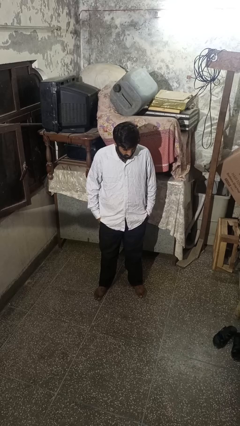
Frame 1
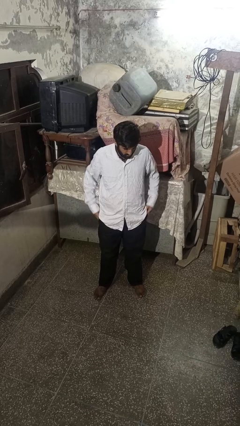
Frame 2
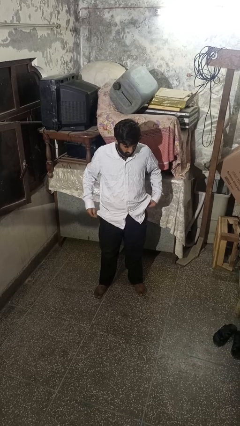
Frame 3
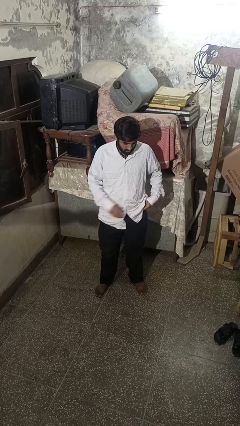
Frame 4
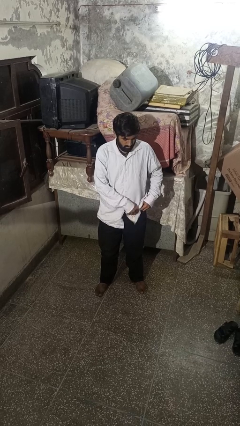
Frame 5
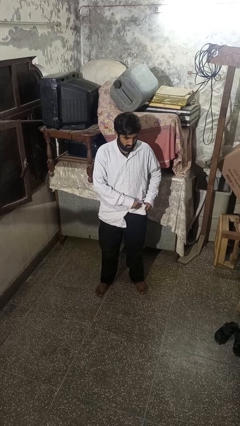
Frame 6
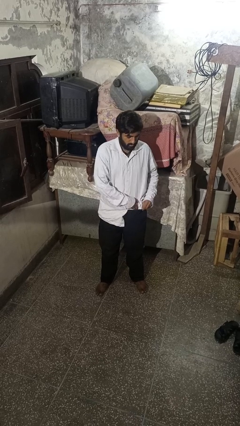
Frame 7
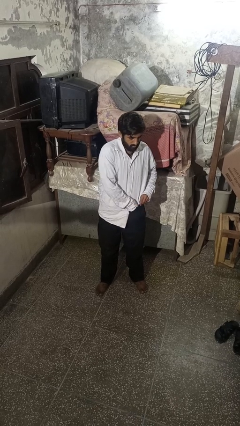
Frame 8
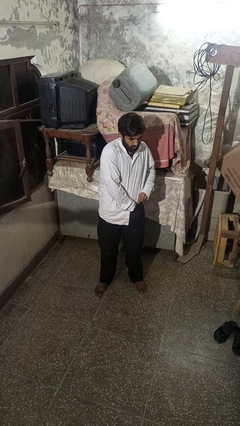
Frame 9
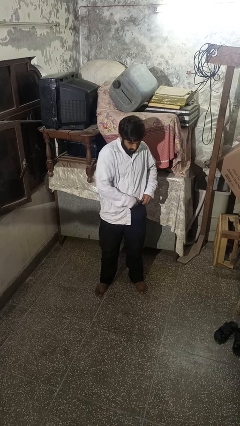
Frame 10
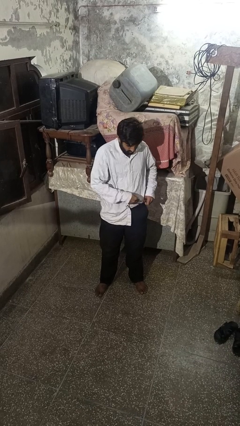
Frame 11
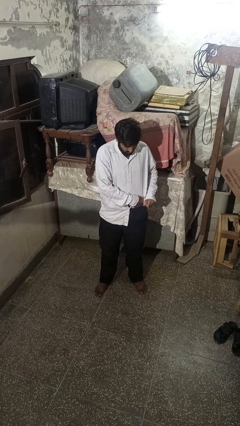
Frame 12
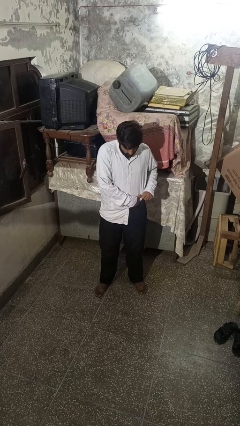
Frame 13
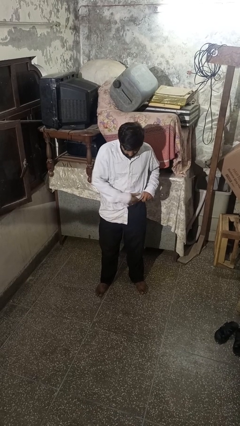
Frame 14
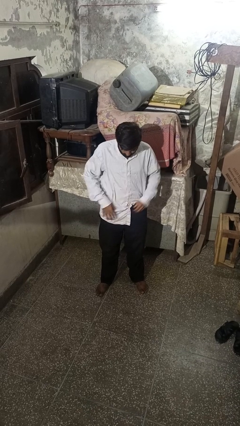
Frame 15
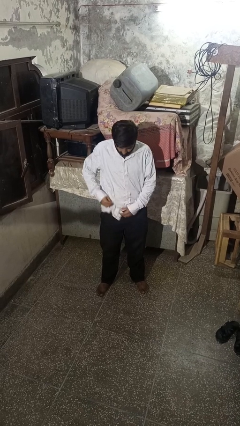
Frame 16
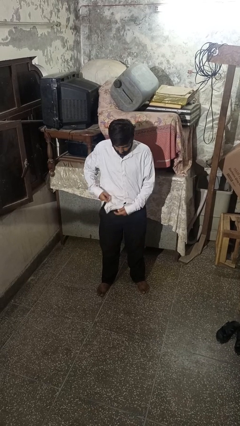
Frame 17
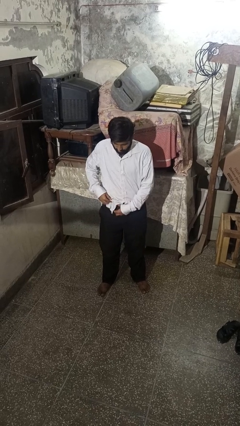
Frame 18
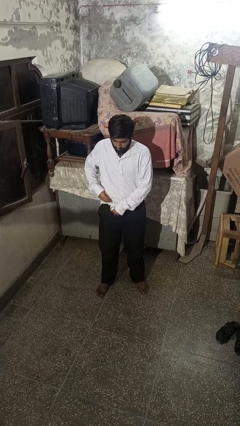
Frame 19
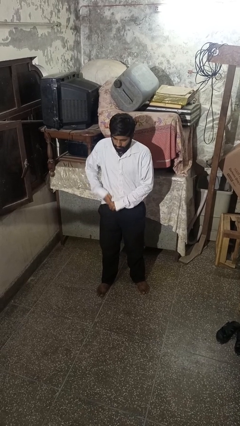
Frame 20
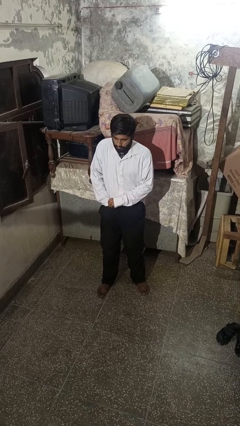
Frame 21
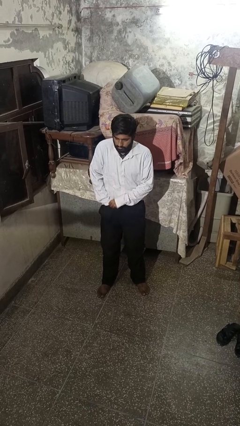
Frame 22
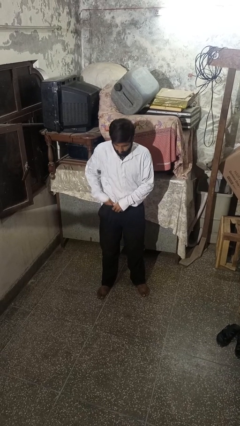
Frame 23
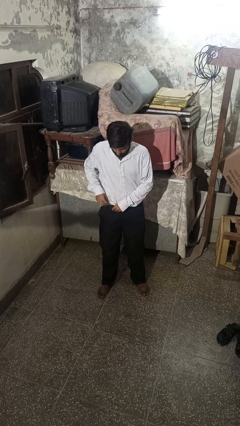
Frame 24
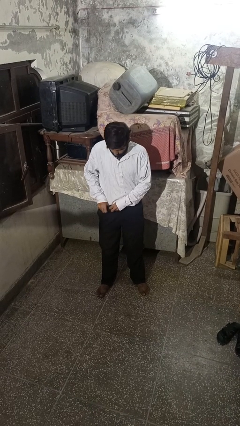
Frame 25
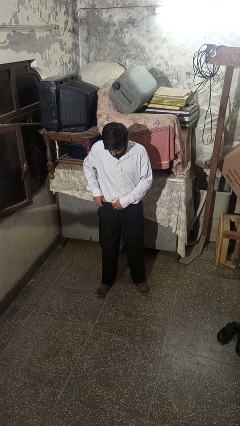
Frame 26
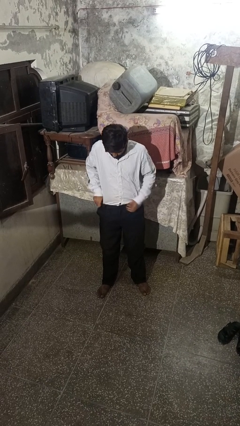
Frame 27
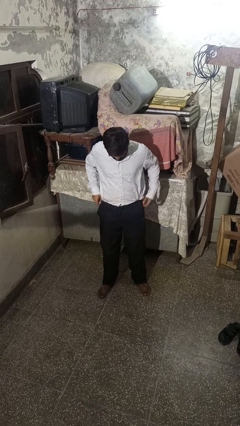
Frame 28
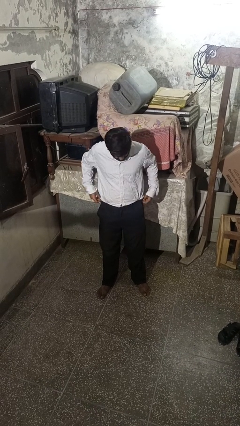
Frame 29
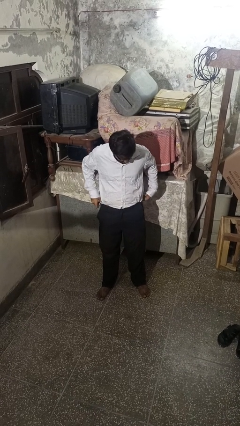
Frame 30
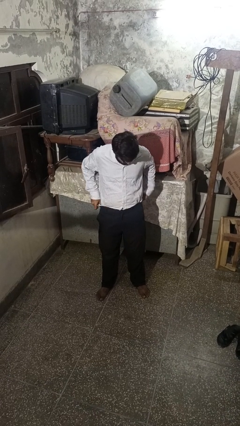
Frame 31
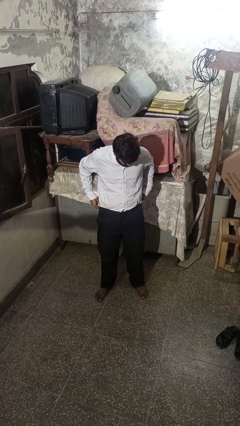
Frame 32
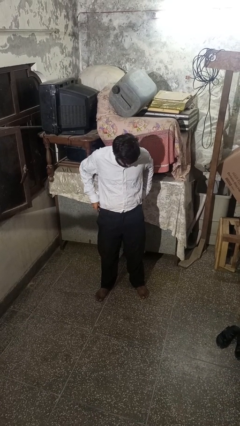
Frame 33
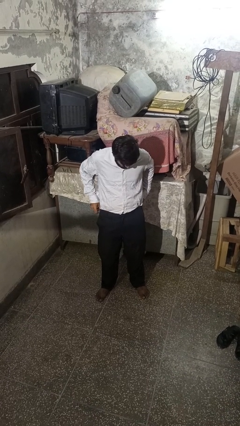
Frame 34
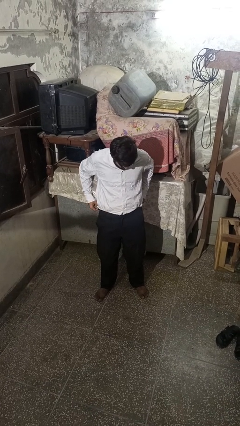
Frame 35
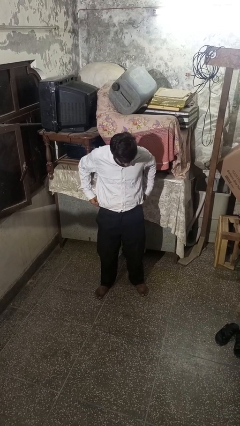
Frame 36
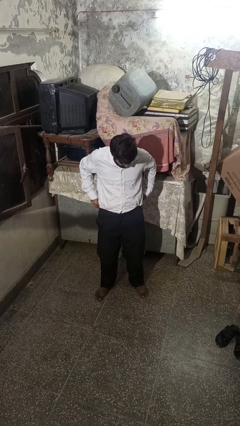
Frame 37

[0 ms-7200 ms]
person tucks in shirt

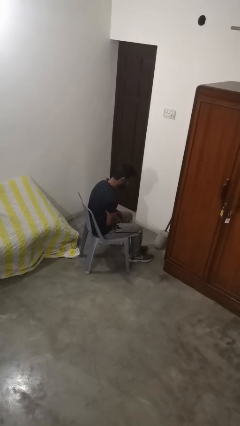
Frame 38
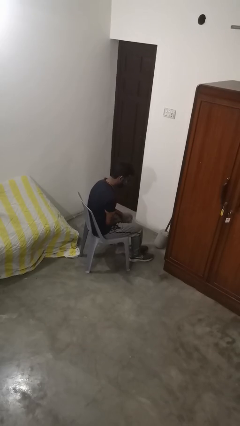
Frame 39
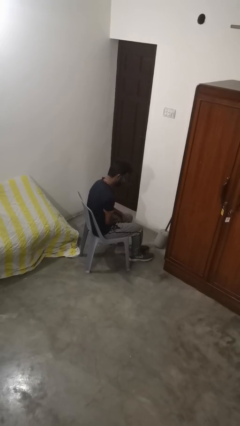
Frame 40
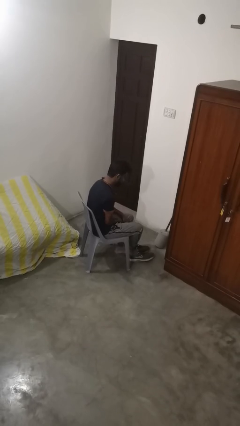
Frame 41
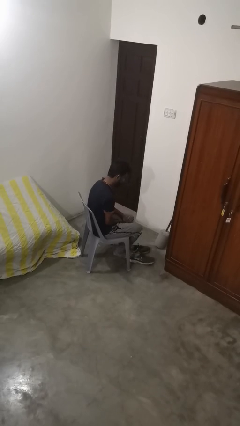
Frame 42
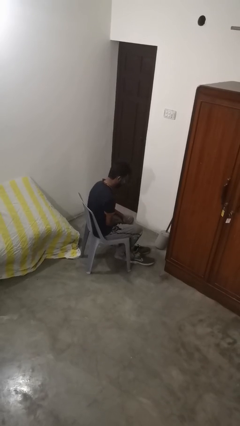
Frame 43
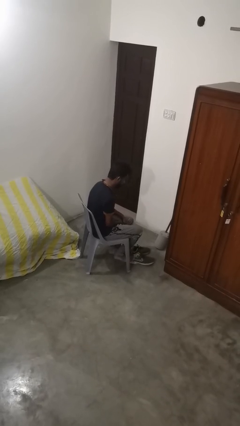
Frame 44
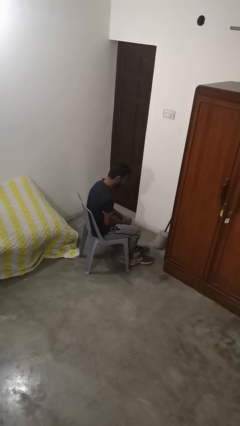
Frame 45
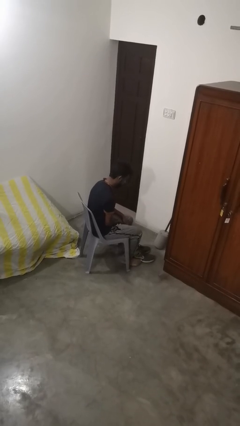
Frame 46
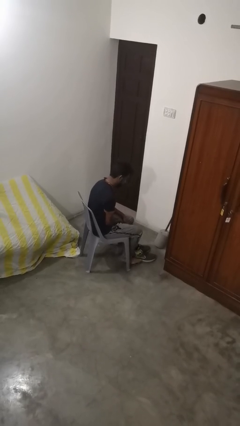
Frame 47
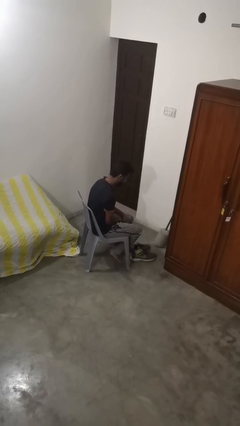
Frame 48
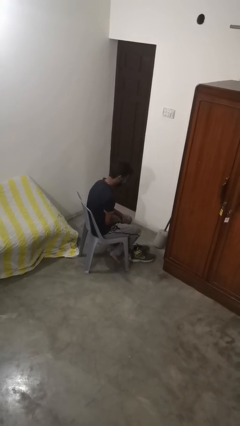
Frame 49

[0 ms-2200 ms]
person takes off shoes

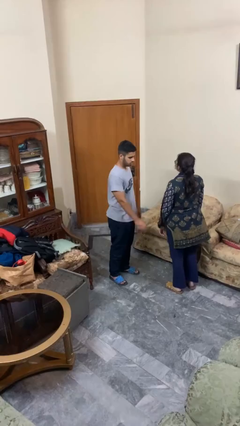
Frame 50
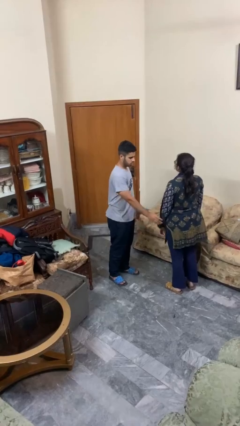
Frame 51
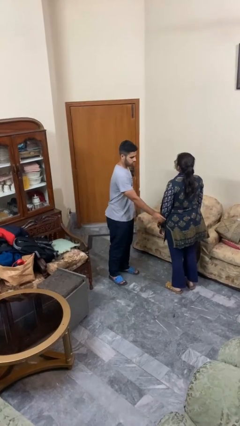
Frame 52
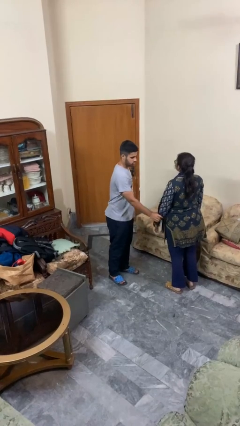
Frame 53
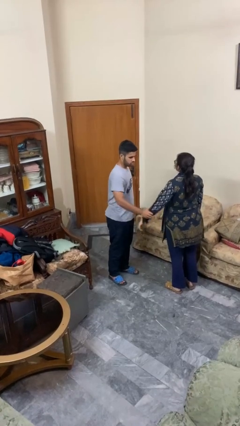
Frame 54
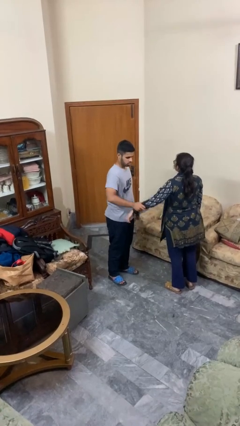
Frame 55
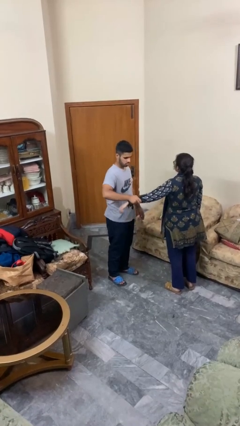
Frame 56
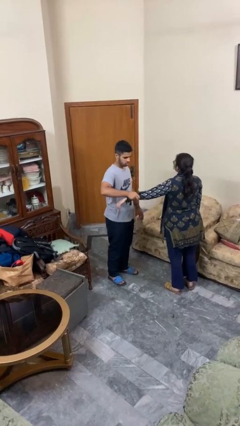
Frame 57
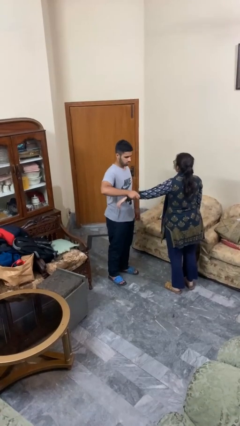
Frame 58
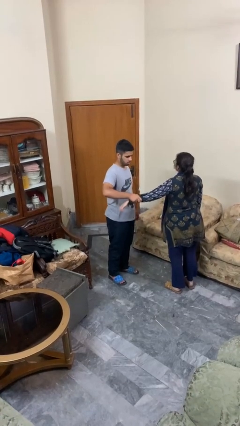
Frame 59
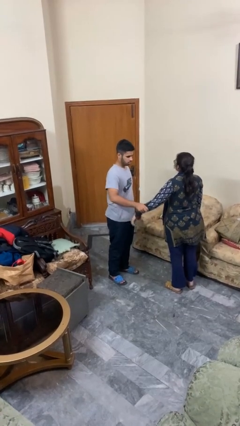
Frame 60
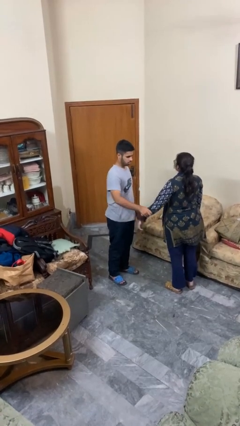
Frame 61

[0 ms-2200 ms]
person grabs person by forearm

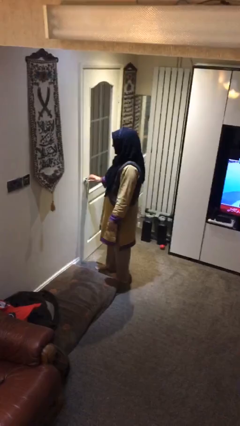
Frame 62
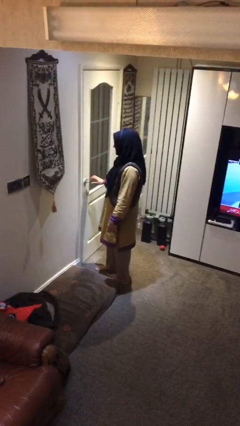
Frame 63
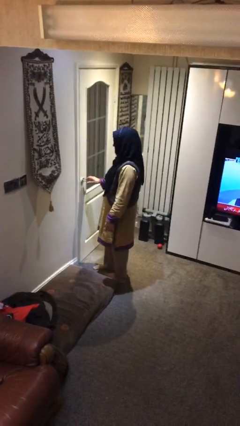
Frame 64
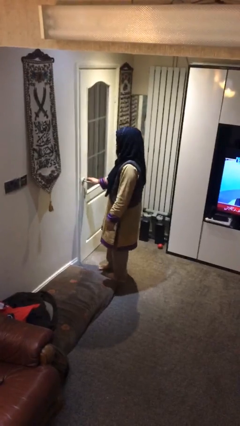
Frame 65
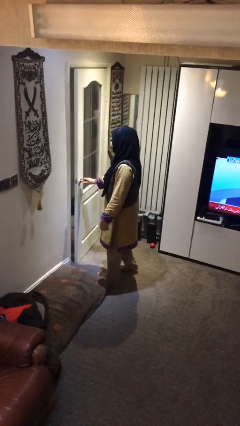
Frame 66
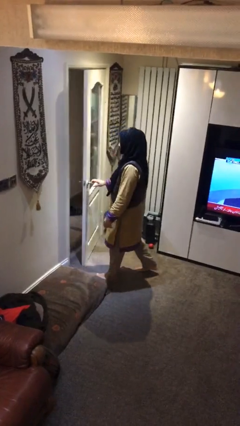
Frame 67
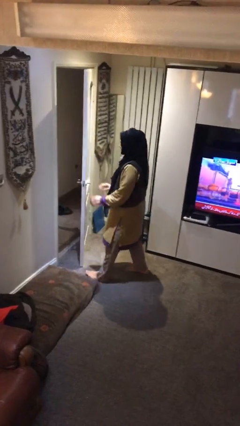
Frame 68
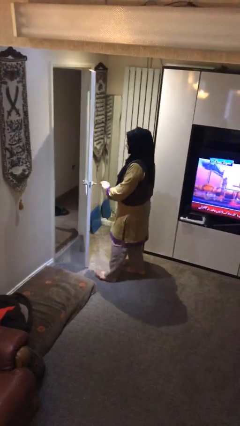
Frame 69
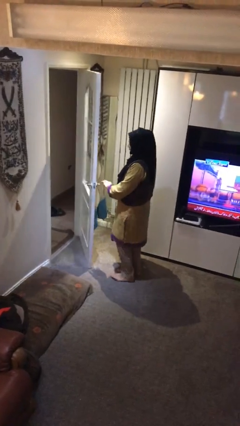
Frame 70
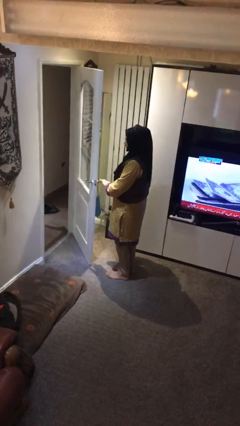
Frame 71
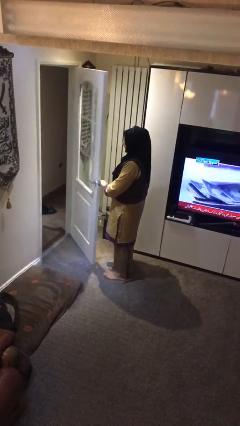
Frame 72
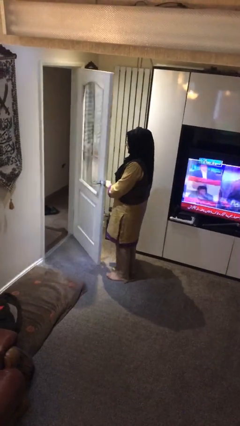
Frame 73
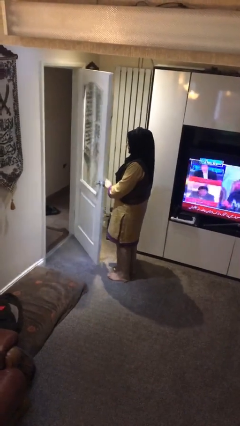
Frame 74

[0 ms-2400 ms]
person opens facility door

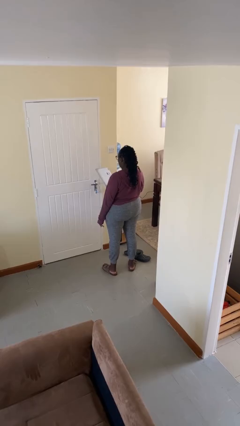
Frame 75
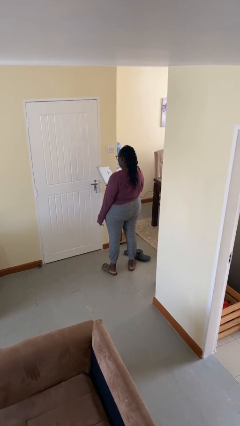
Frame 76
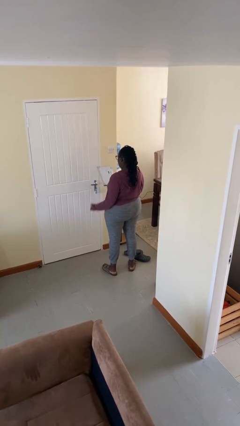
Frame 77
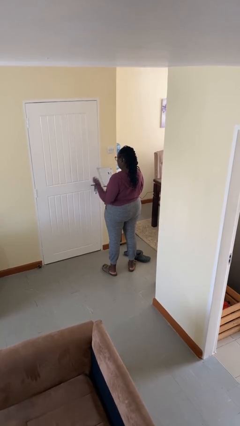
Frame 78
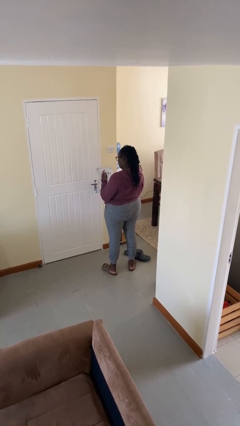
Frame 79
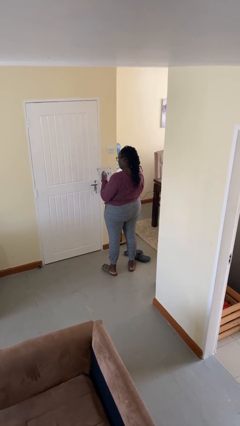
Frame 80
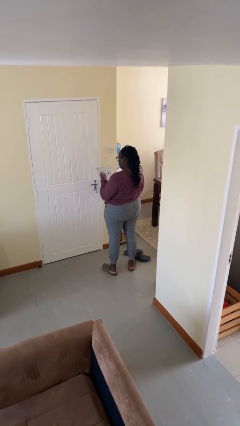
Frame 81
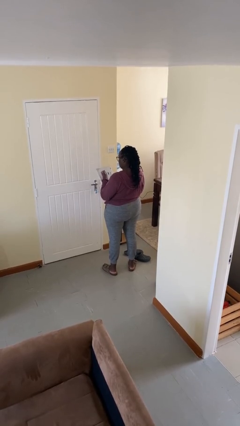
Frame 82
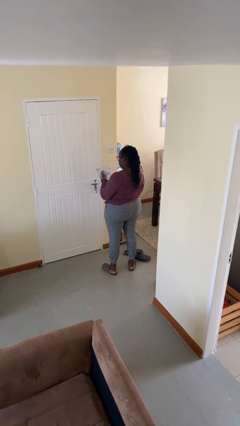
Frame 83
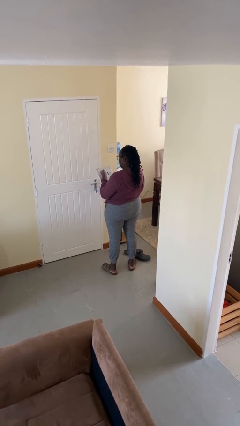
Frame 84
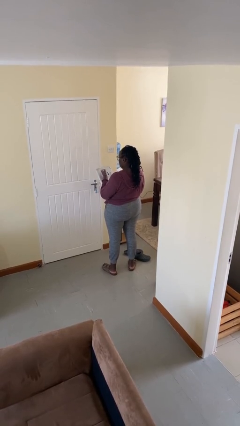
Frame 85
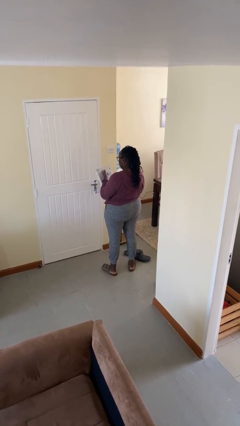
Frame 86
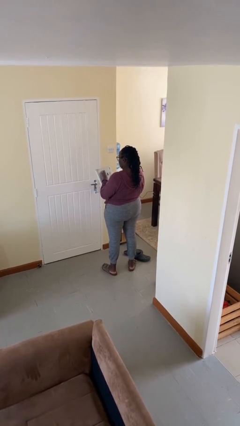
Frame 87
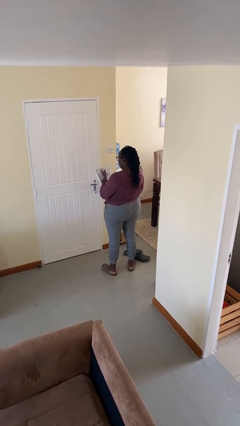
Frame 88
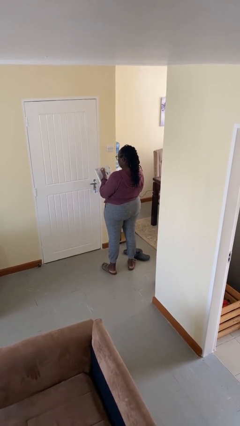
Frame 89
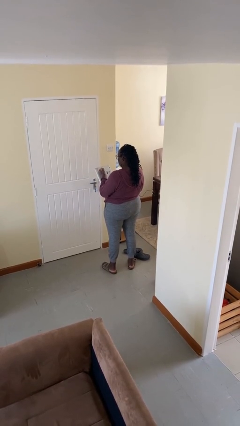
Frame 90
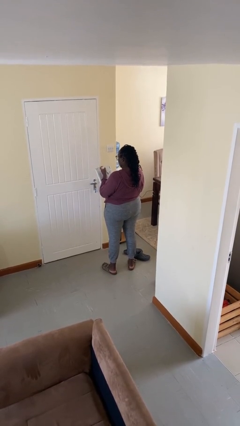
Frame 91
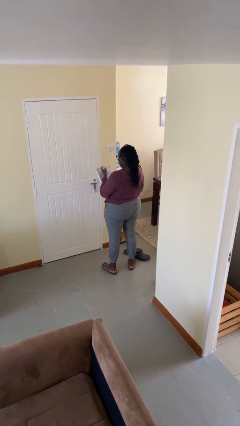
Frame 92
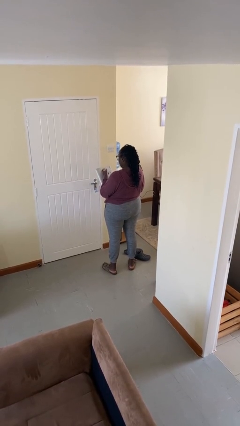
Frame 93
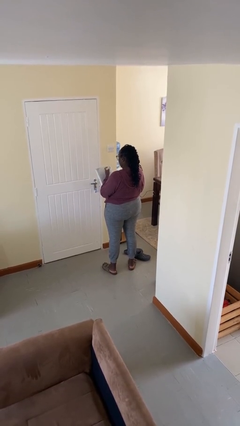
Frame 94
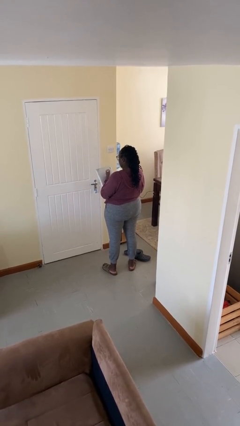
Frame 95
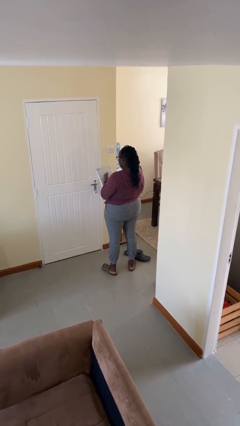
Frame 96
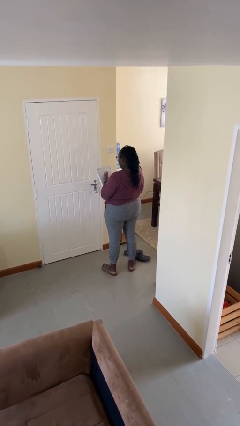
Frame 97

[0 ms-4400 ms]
person taps object with finger
